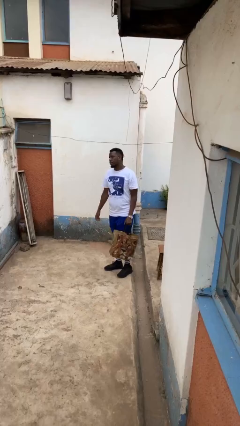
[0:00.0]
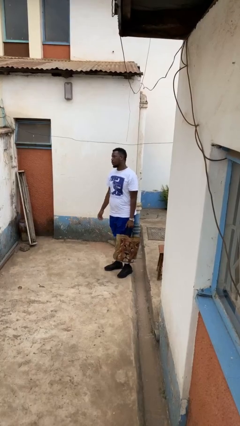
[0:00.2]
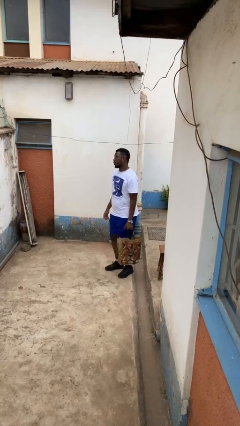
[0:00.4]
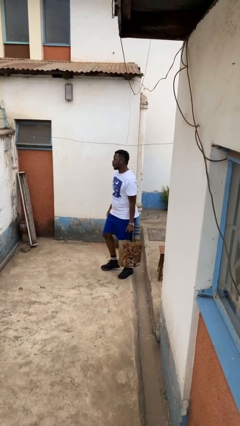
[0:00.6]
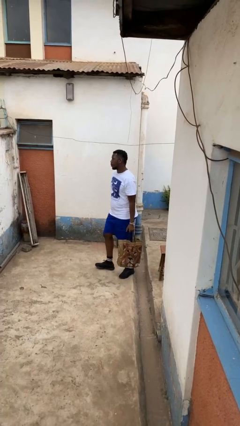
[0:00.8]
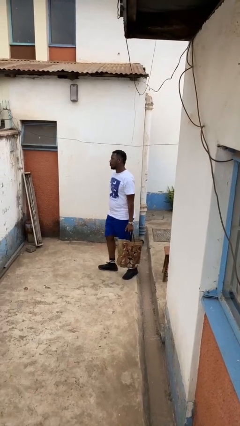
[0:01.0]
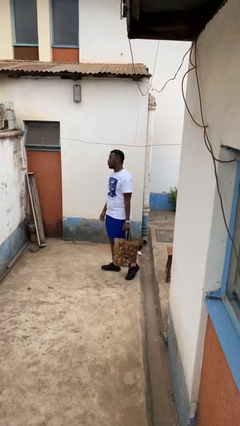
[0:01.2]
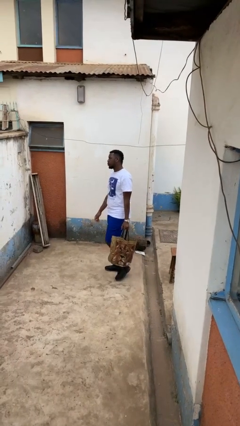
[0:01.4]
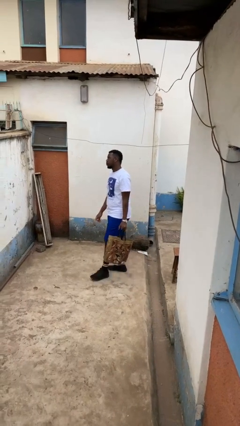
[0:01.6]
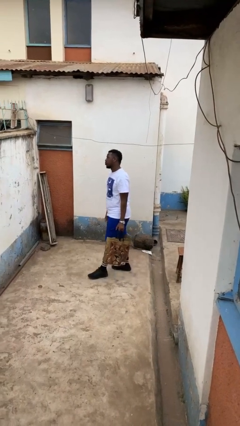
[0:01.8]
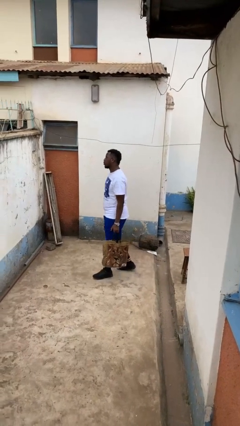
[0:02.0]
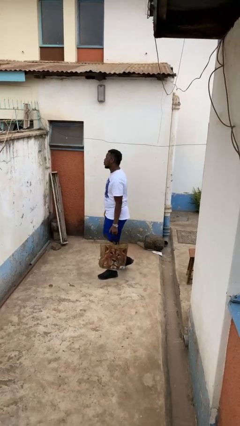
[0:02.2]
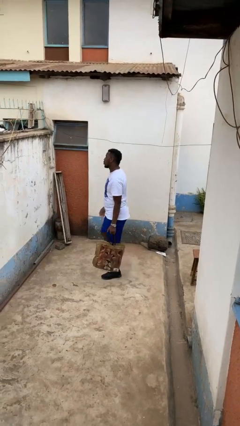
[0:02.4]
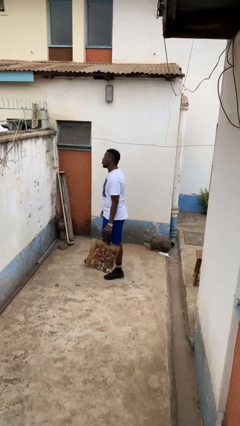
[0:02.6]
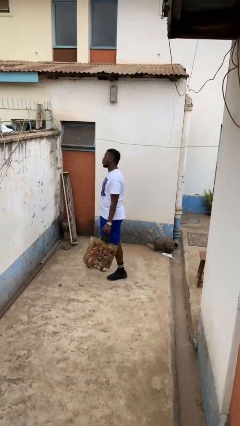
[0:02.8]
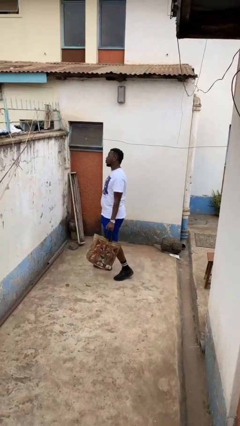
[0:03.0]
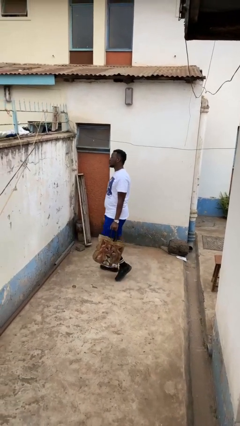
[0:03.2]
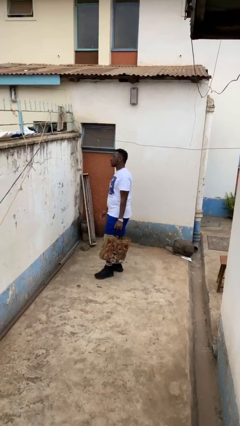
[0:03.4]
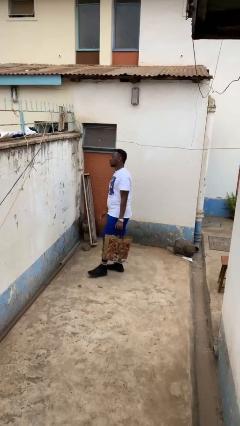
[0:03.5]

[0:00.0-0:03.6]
person carries groceries

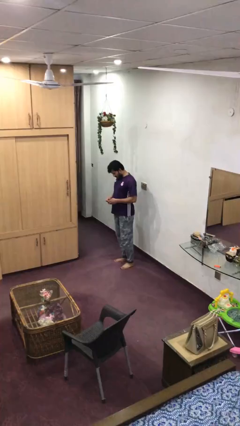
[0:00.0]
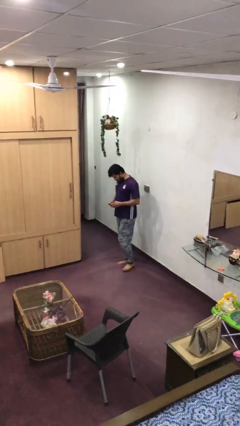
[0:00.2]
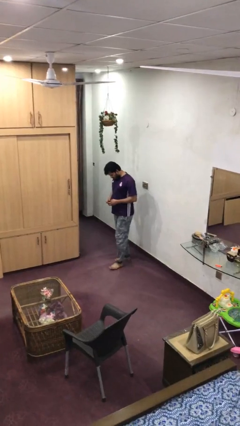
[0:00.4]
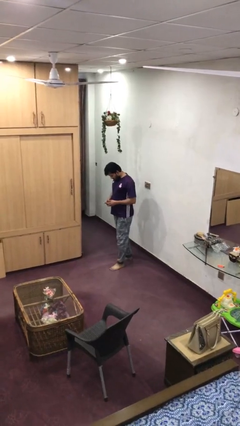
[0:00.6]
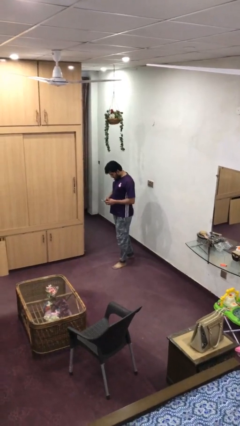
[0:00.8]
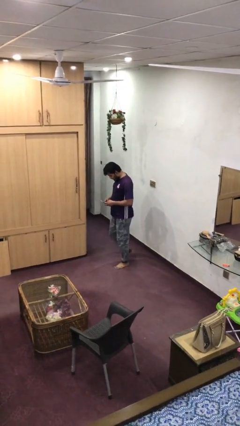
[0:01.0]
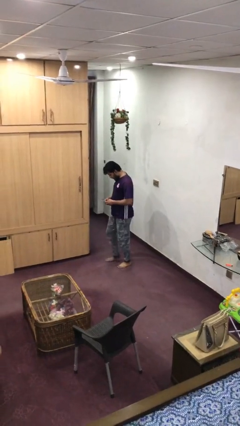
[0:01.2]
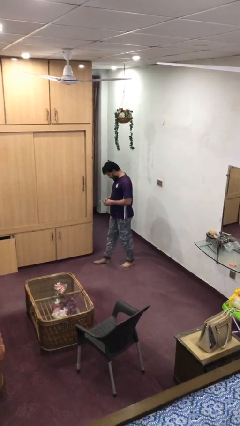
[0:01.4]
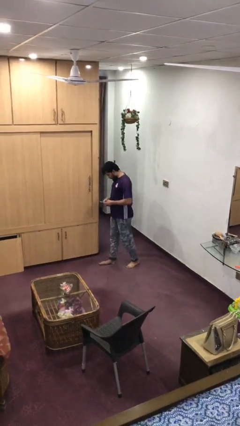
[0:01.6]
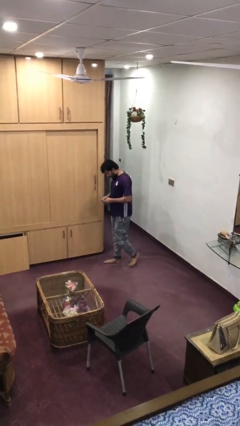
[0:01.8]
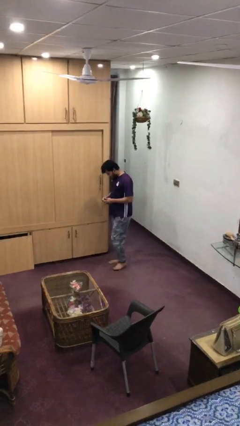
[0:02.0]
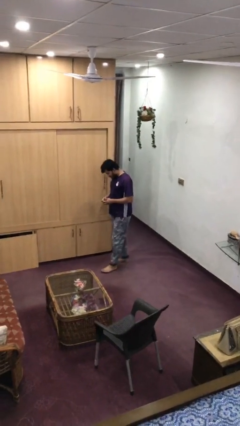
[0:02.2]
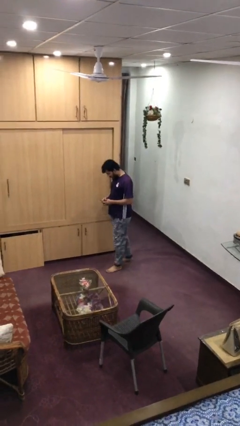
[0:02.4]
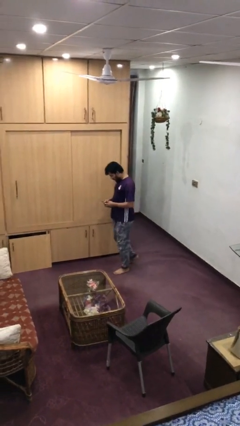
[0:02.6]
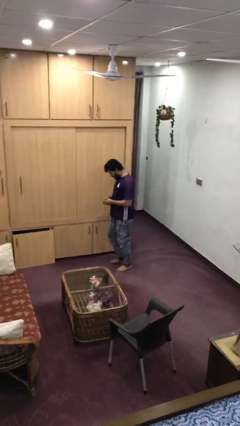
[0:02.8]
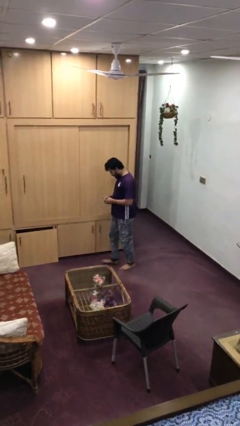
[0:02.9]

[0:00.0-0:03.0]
person texts on phone

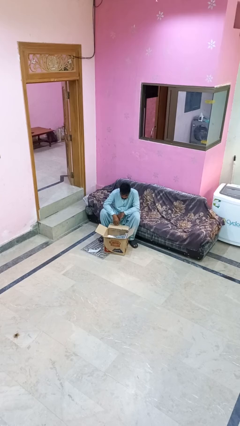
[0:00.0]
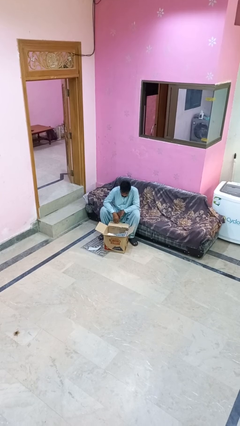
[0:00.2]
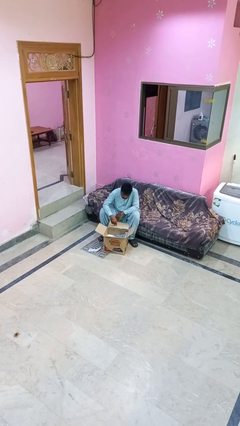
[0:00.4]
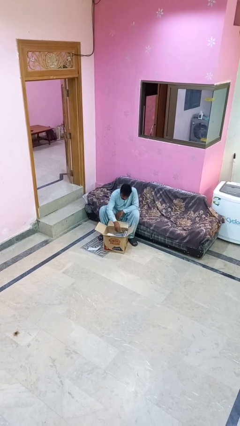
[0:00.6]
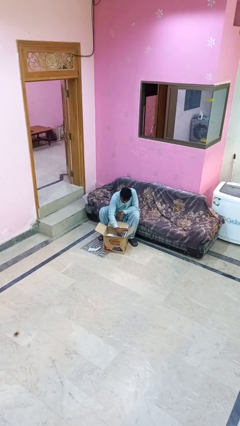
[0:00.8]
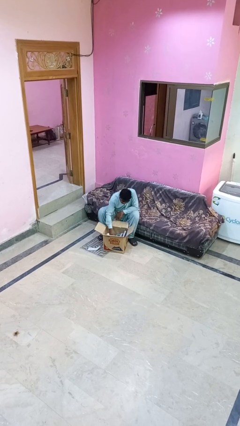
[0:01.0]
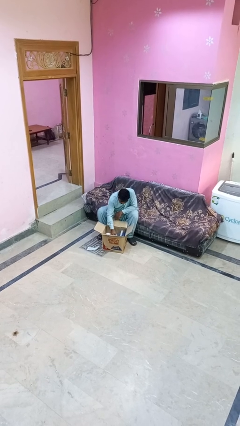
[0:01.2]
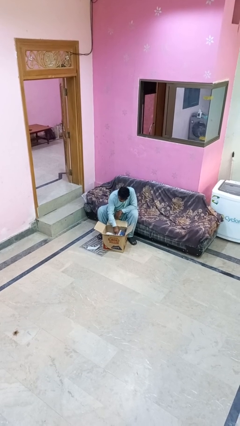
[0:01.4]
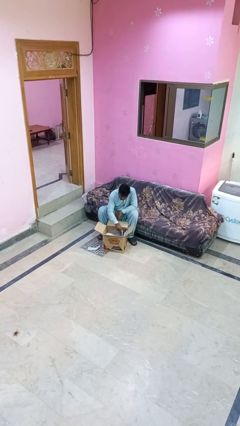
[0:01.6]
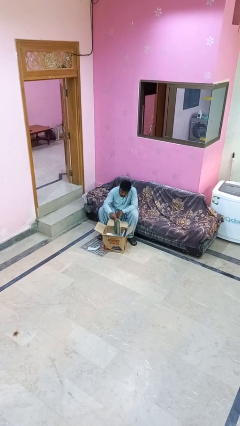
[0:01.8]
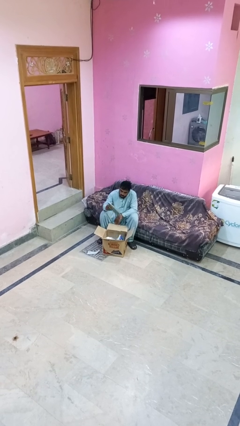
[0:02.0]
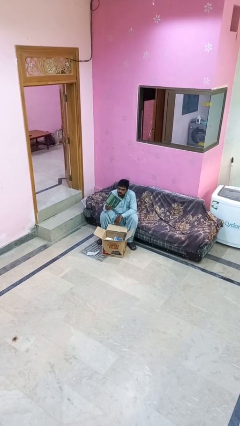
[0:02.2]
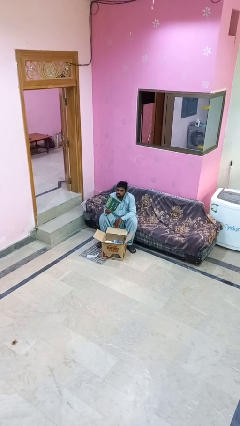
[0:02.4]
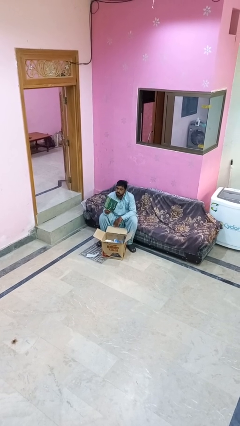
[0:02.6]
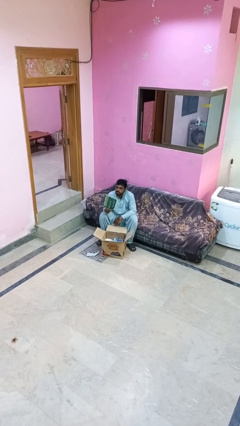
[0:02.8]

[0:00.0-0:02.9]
person takes object from box

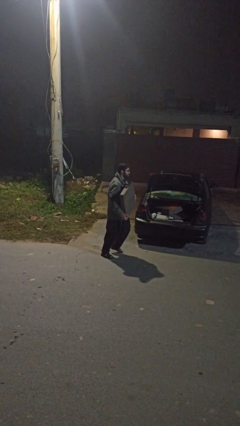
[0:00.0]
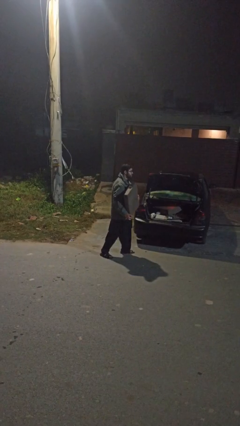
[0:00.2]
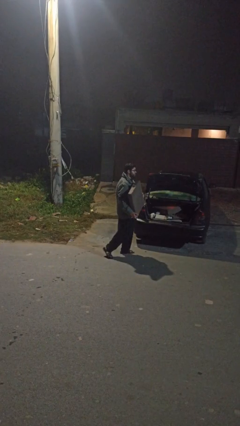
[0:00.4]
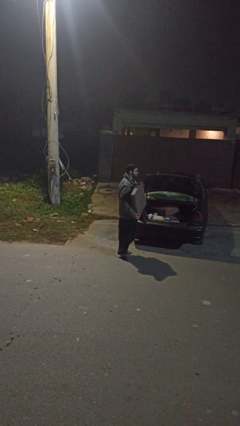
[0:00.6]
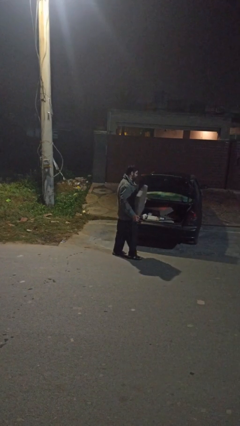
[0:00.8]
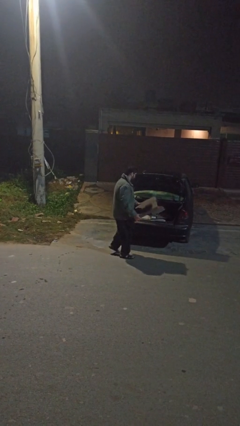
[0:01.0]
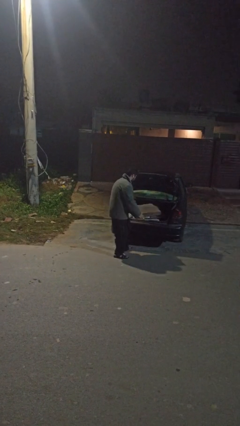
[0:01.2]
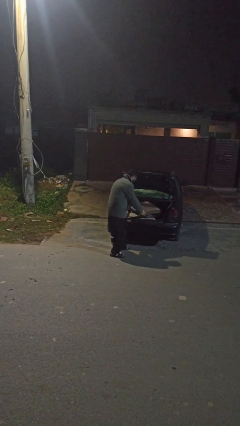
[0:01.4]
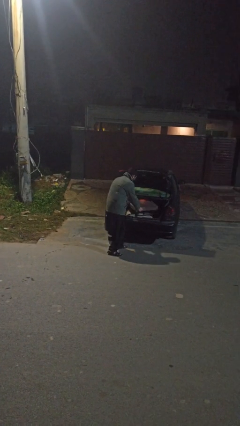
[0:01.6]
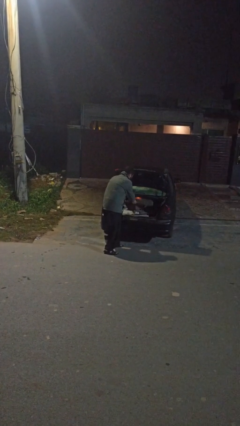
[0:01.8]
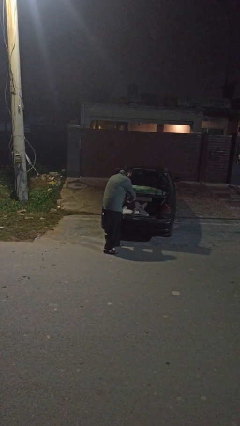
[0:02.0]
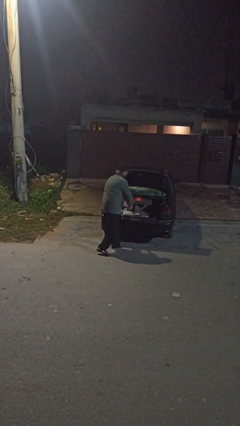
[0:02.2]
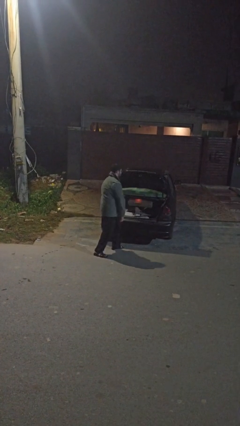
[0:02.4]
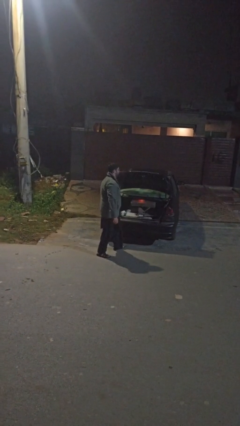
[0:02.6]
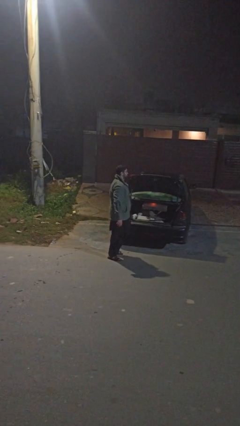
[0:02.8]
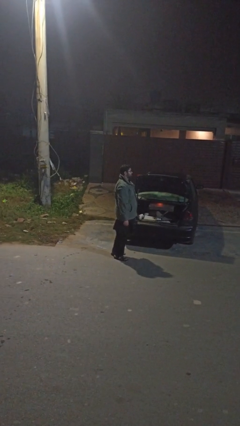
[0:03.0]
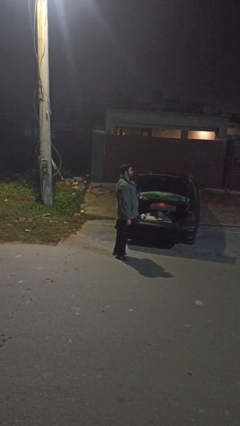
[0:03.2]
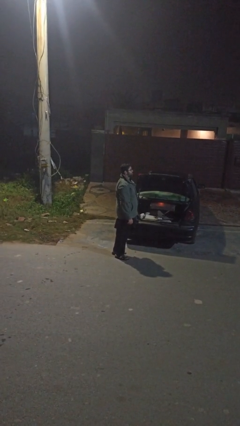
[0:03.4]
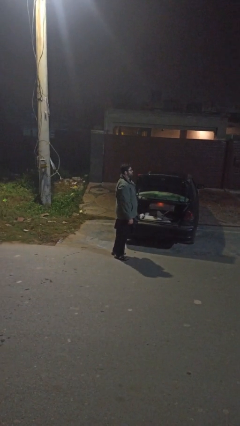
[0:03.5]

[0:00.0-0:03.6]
person loads car

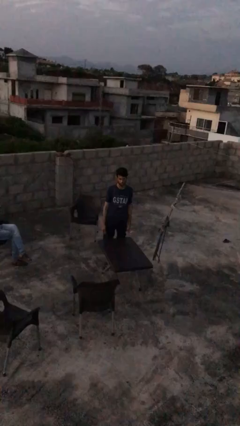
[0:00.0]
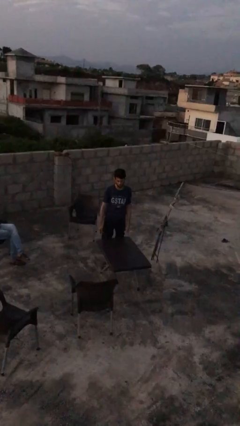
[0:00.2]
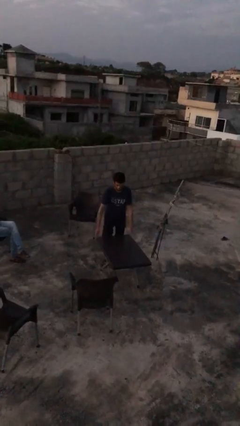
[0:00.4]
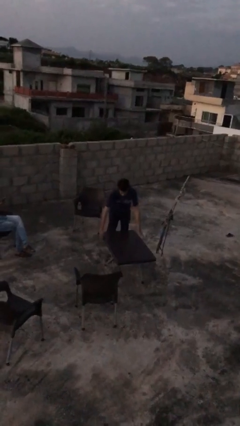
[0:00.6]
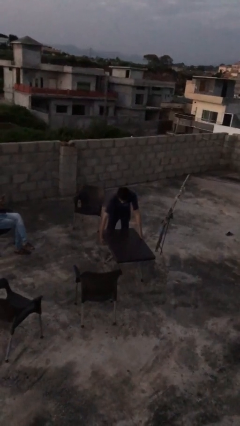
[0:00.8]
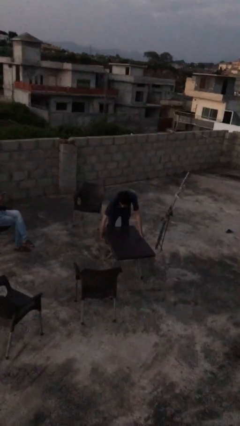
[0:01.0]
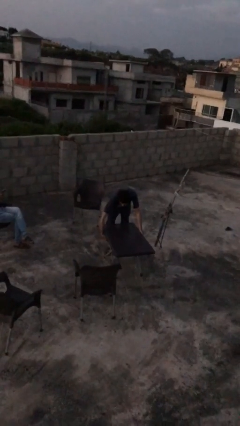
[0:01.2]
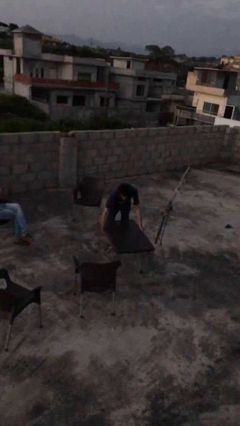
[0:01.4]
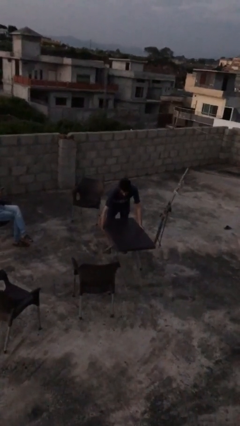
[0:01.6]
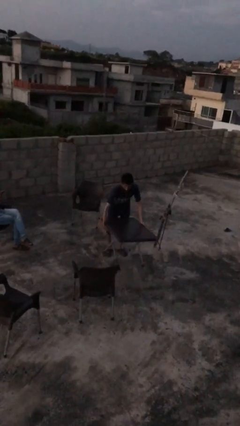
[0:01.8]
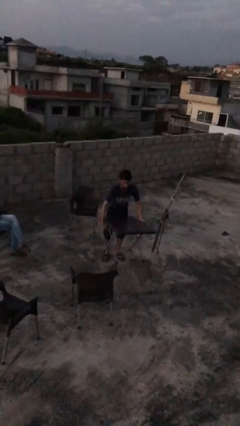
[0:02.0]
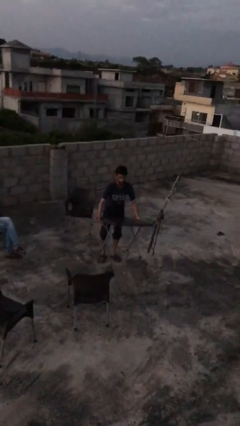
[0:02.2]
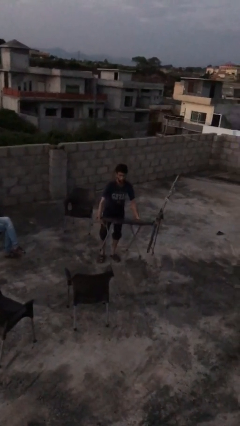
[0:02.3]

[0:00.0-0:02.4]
person picks up object from floor

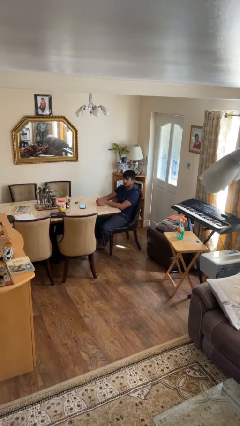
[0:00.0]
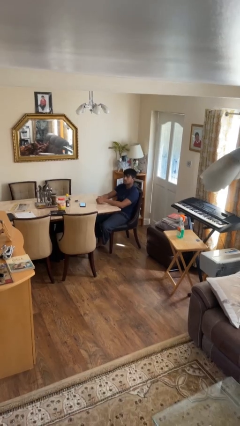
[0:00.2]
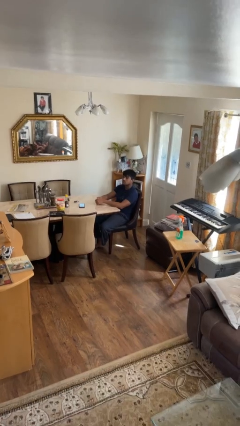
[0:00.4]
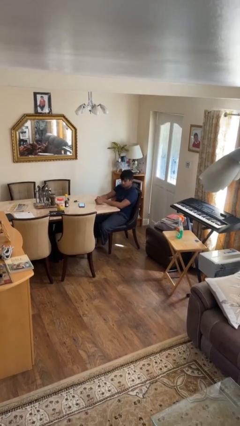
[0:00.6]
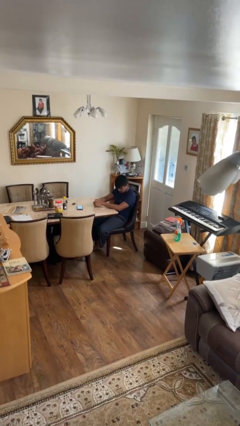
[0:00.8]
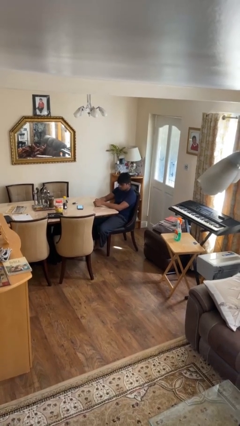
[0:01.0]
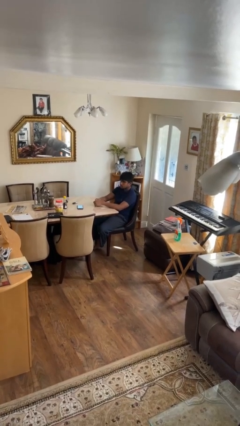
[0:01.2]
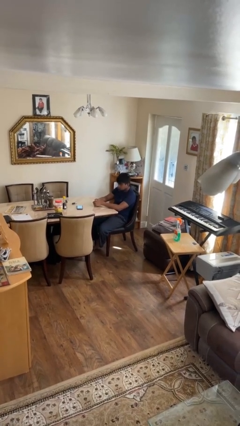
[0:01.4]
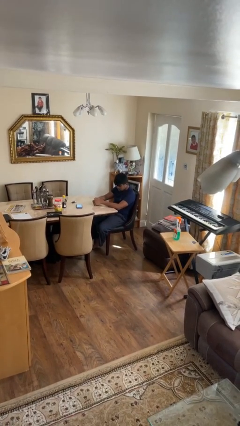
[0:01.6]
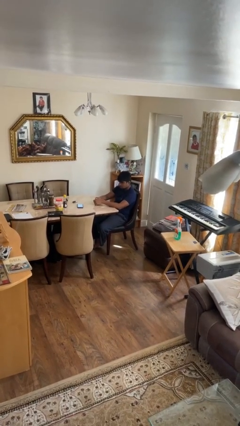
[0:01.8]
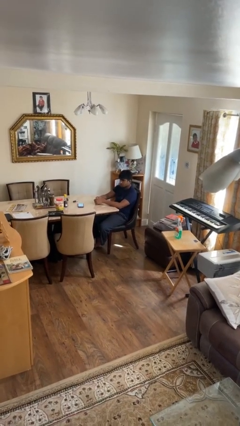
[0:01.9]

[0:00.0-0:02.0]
person nods head
